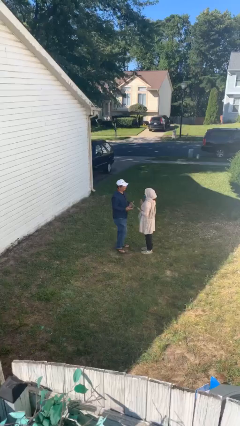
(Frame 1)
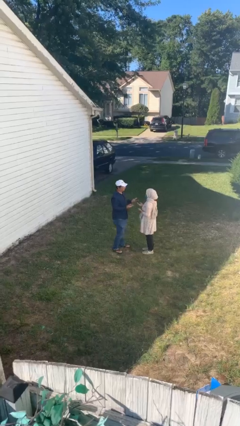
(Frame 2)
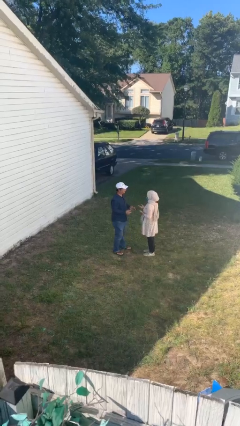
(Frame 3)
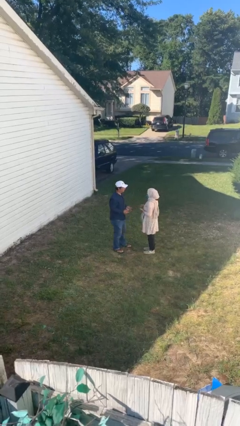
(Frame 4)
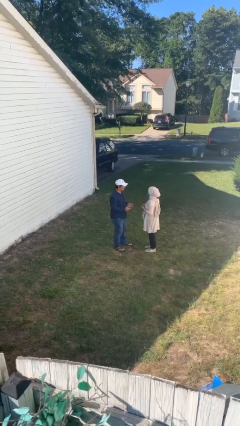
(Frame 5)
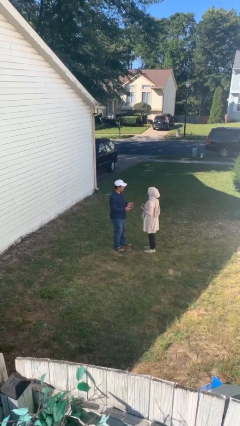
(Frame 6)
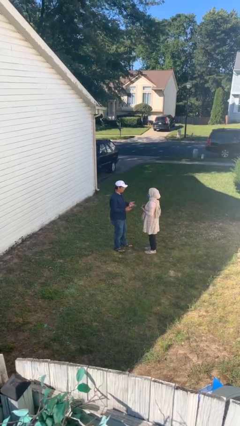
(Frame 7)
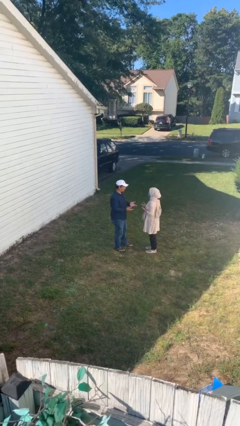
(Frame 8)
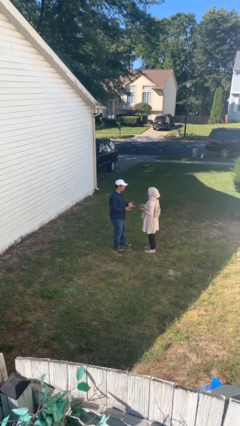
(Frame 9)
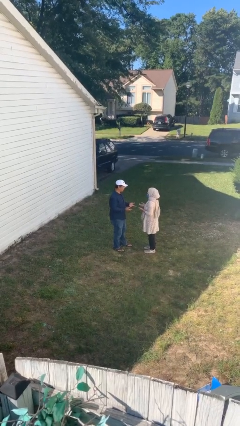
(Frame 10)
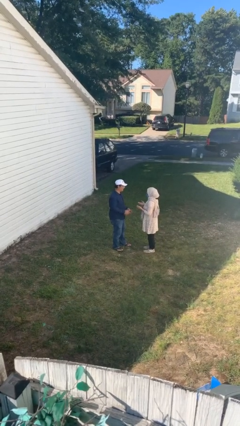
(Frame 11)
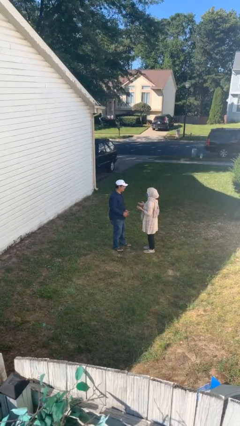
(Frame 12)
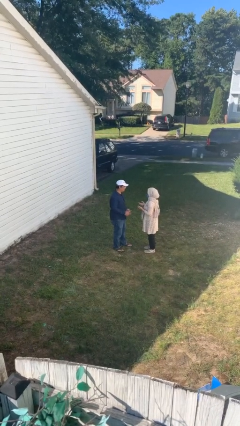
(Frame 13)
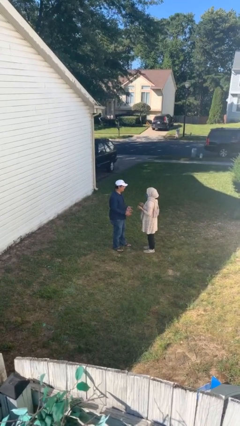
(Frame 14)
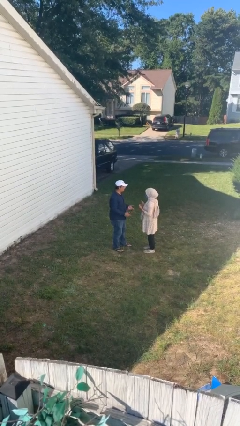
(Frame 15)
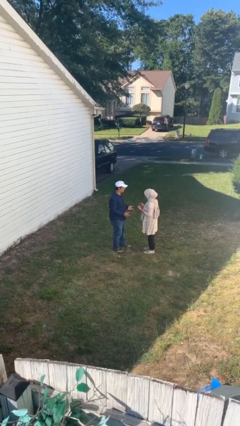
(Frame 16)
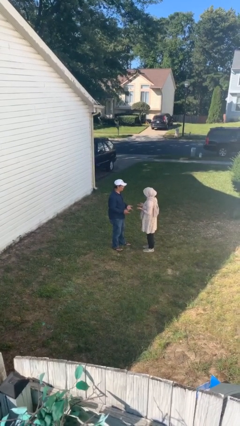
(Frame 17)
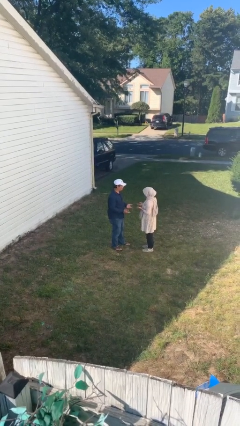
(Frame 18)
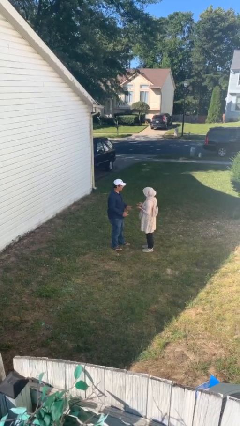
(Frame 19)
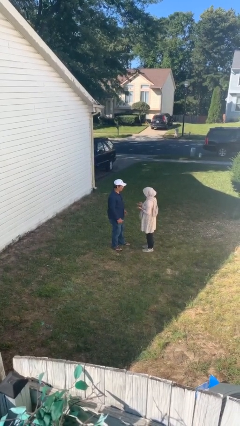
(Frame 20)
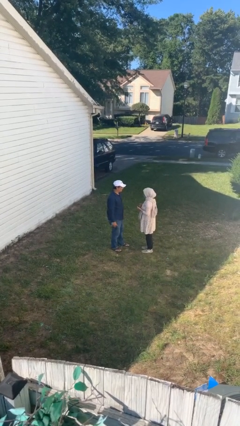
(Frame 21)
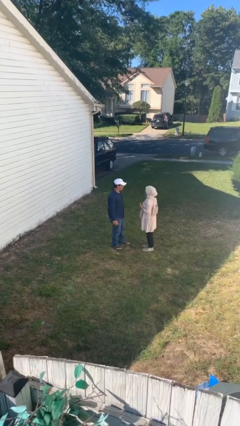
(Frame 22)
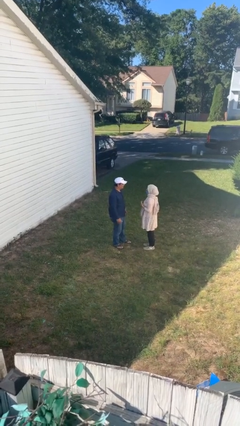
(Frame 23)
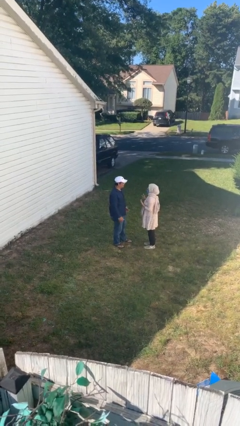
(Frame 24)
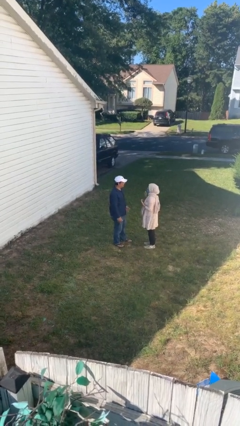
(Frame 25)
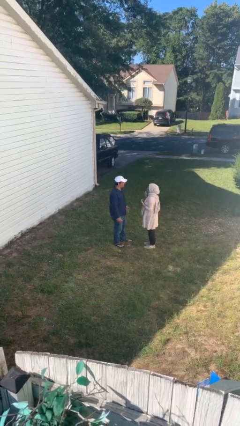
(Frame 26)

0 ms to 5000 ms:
person talks to person

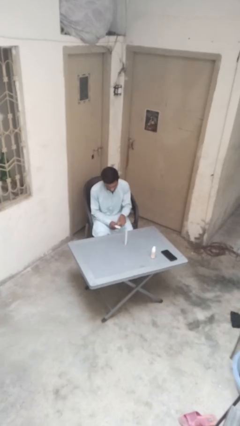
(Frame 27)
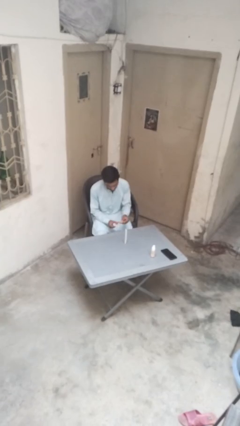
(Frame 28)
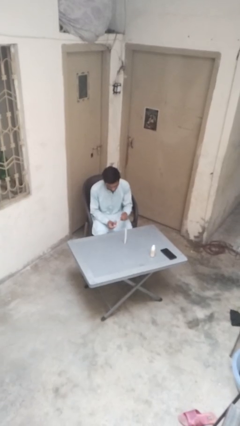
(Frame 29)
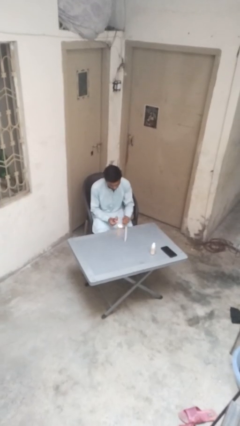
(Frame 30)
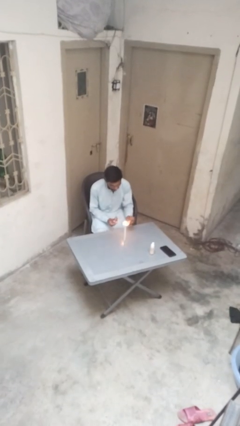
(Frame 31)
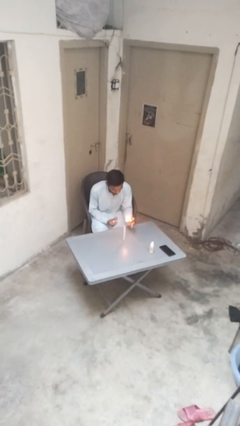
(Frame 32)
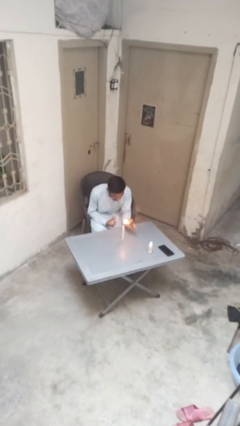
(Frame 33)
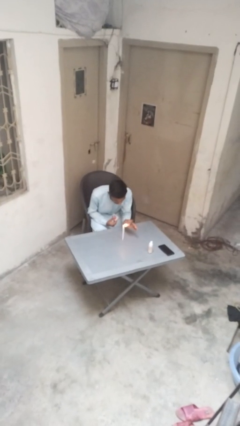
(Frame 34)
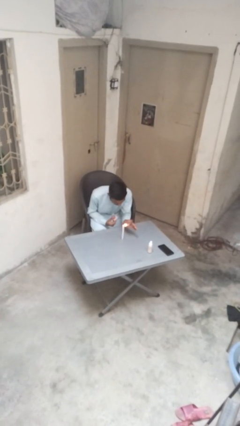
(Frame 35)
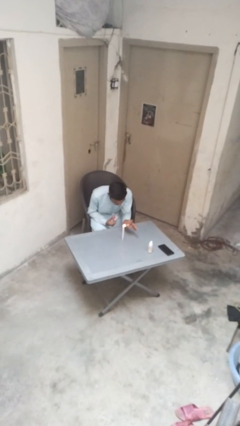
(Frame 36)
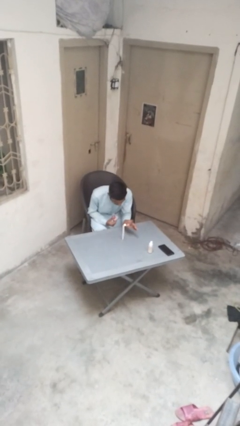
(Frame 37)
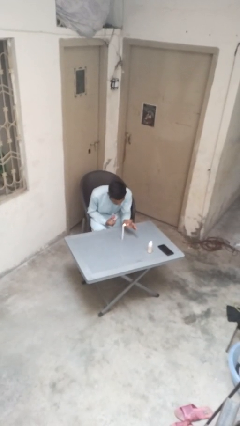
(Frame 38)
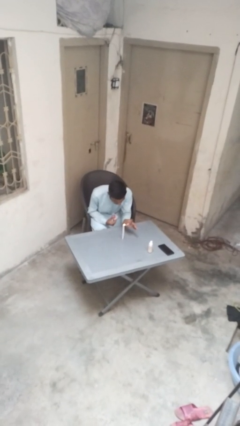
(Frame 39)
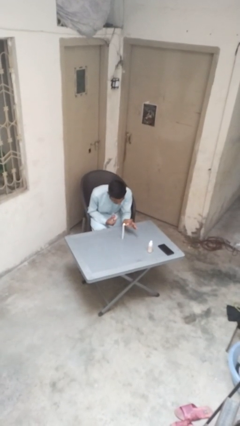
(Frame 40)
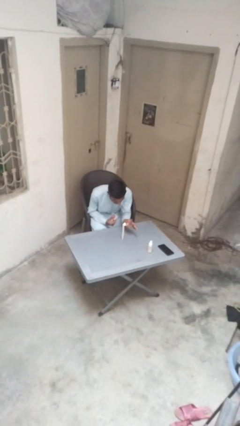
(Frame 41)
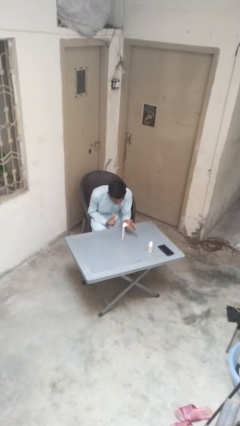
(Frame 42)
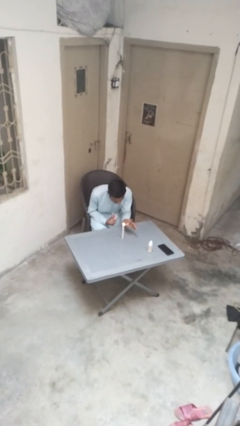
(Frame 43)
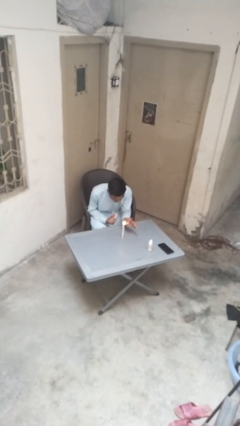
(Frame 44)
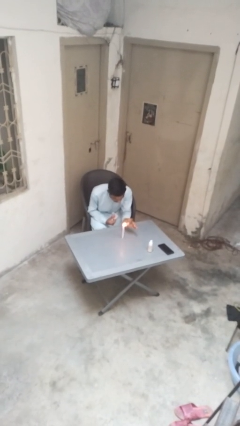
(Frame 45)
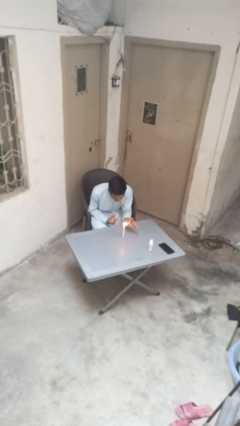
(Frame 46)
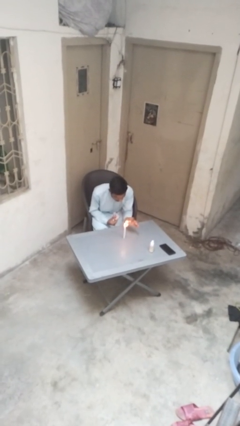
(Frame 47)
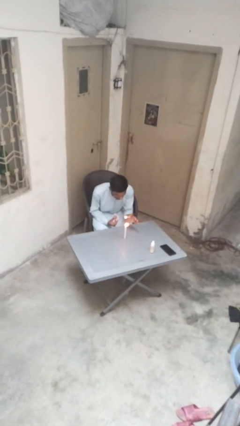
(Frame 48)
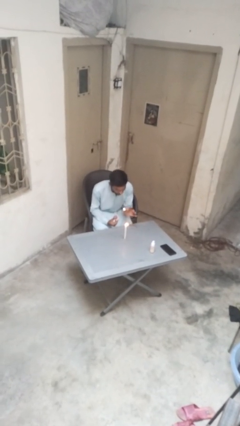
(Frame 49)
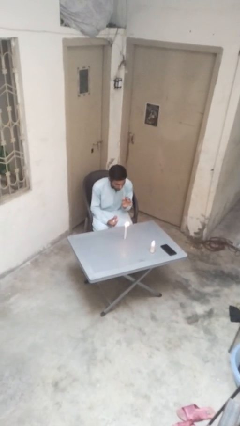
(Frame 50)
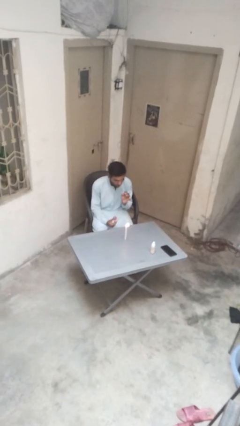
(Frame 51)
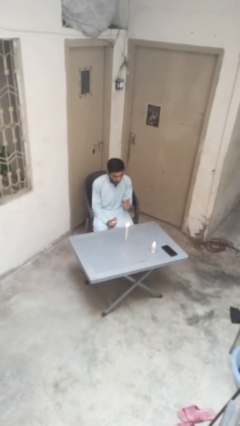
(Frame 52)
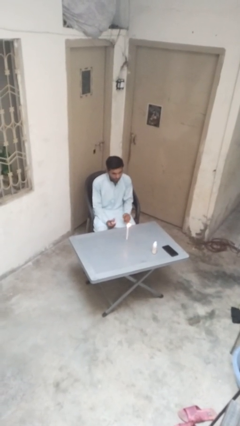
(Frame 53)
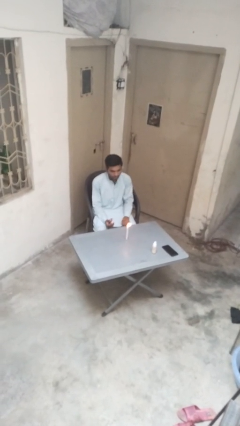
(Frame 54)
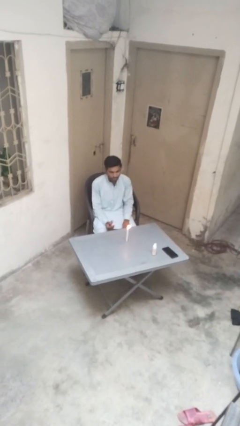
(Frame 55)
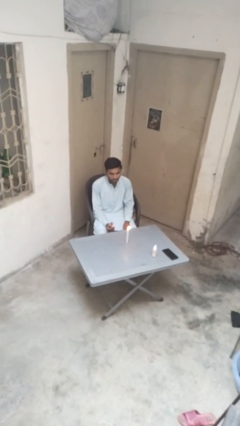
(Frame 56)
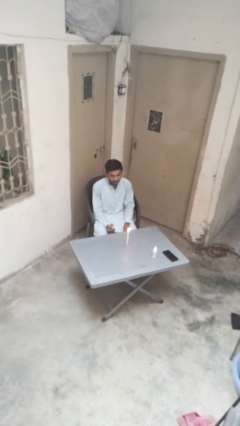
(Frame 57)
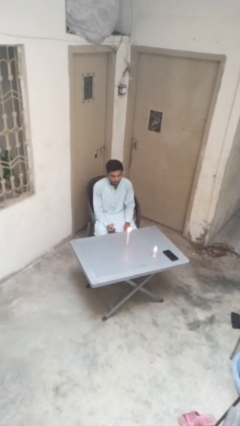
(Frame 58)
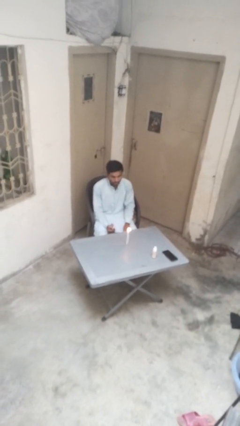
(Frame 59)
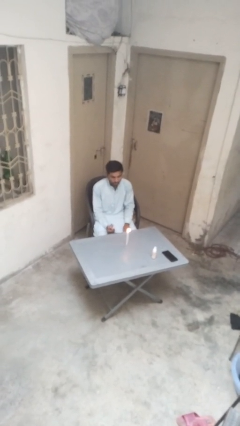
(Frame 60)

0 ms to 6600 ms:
person lights candle

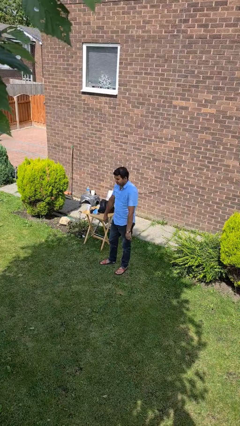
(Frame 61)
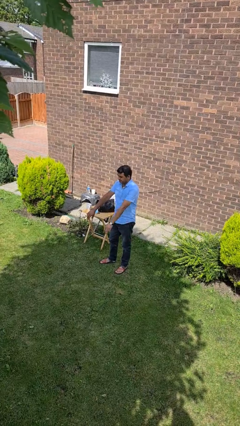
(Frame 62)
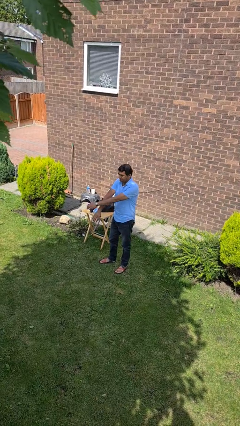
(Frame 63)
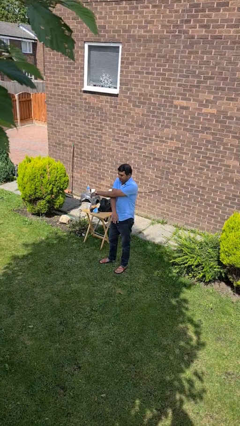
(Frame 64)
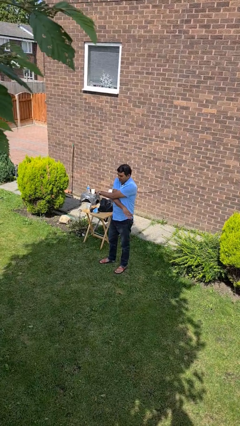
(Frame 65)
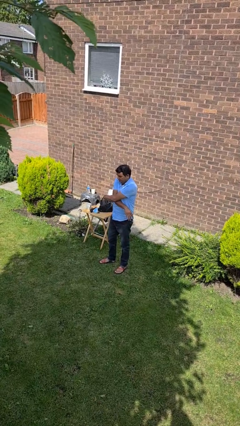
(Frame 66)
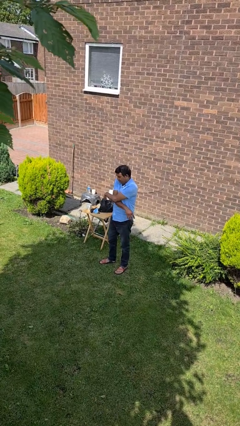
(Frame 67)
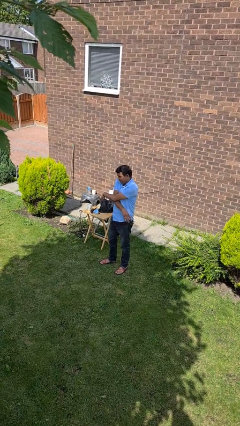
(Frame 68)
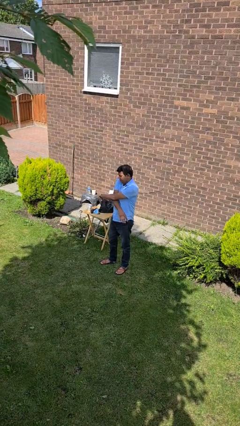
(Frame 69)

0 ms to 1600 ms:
person crosses arms

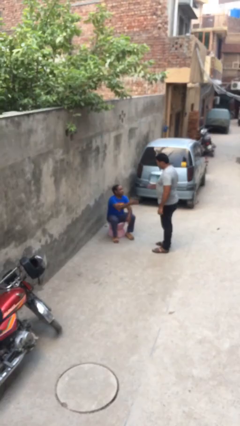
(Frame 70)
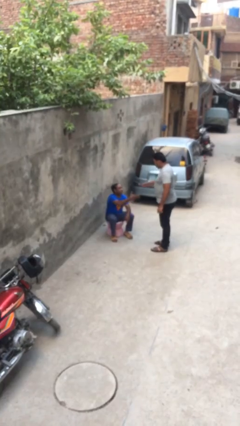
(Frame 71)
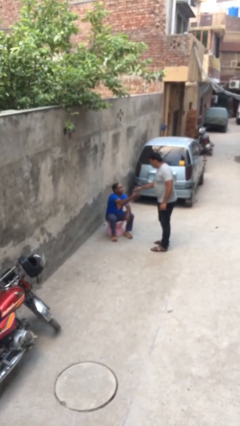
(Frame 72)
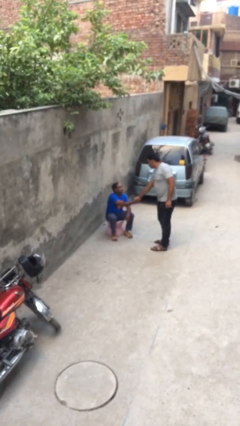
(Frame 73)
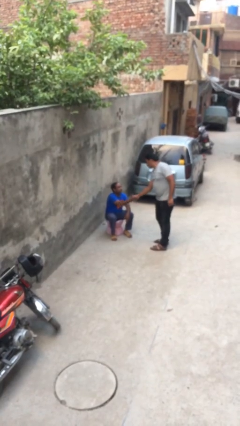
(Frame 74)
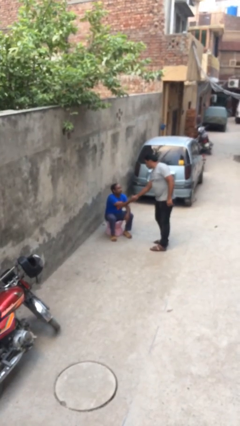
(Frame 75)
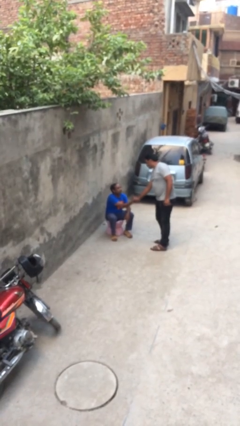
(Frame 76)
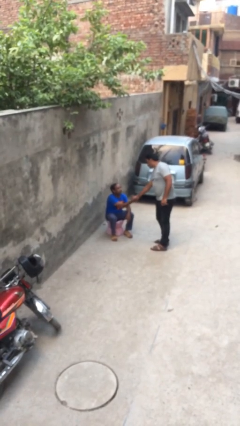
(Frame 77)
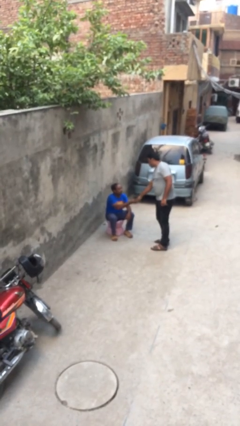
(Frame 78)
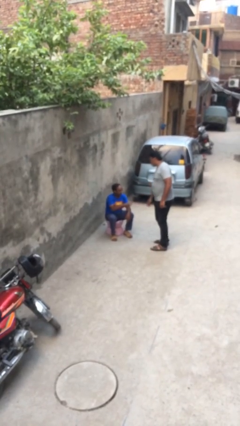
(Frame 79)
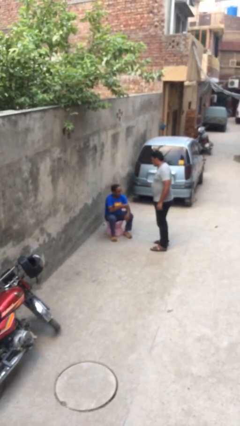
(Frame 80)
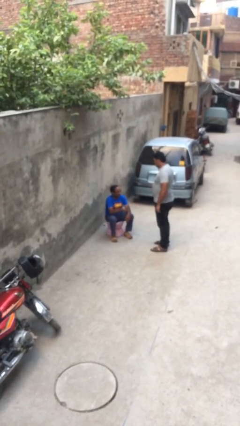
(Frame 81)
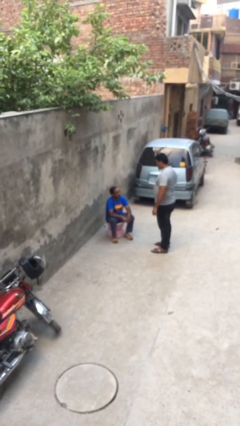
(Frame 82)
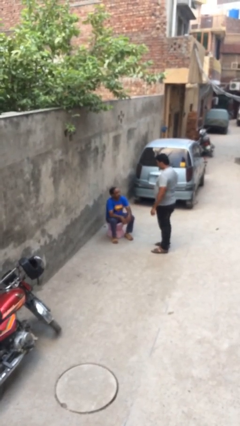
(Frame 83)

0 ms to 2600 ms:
person shakes hand

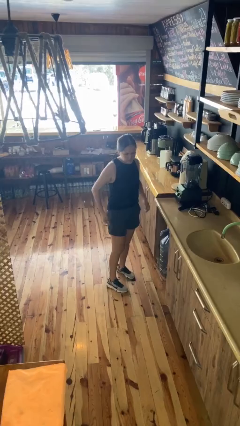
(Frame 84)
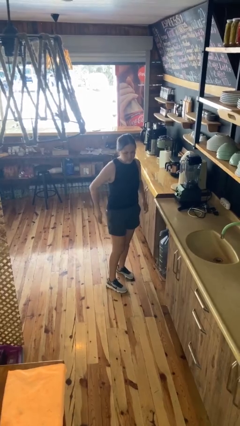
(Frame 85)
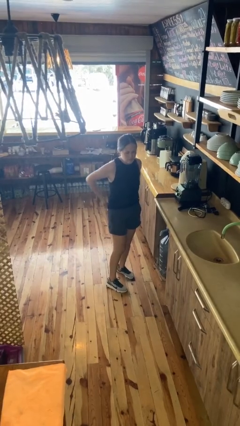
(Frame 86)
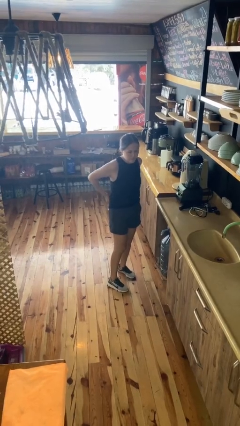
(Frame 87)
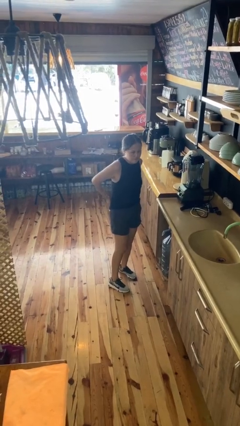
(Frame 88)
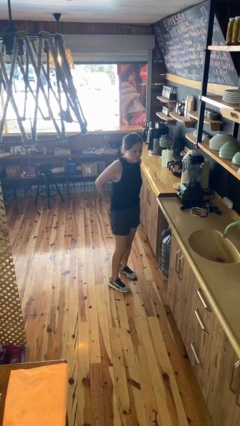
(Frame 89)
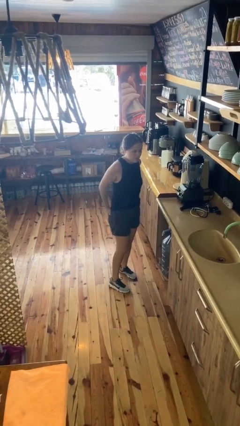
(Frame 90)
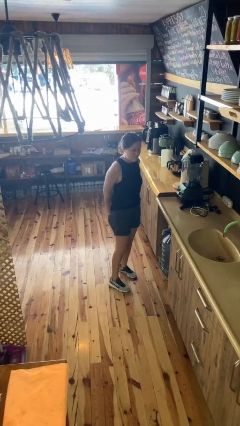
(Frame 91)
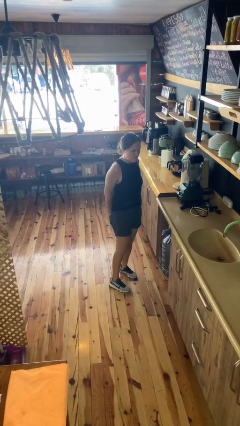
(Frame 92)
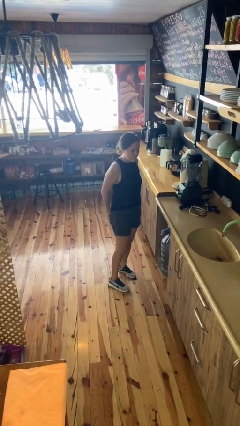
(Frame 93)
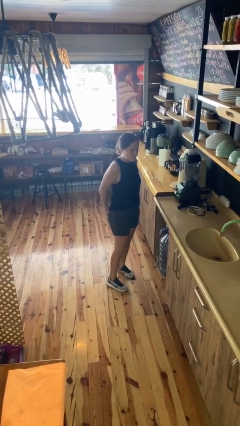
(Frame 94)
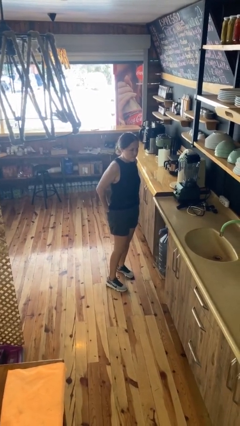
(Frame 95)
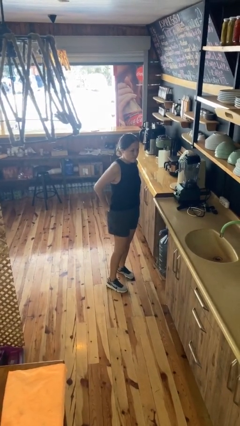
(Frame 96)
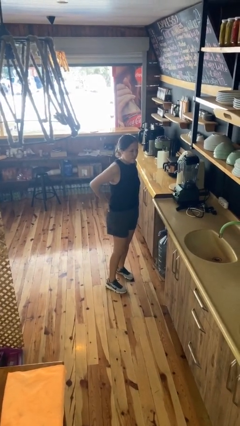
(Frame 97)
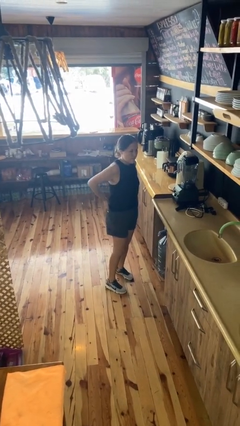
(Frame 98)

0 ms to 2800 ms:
person puts hands in back pockets
